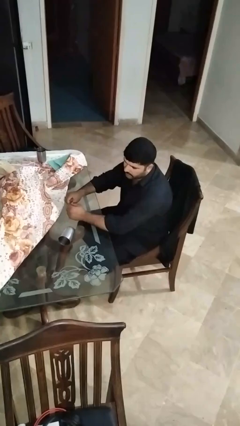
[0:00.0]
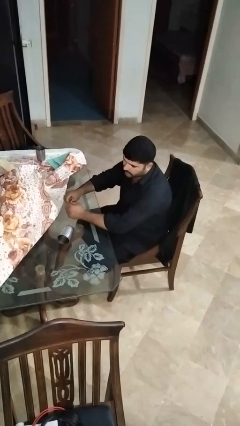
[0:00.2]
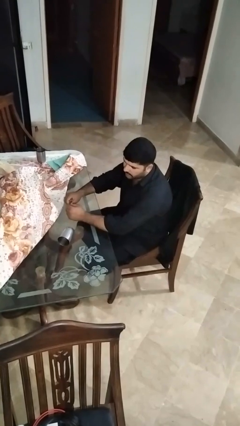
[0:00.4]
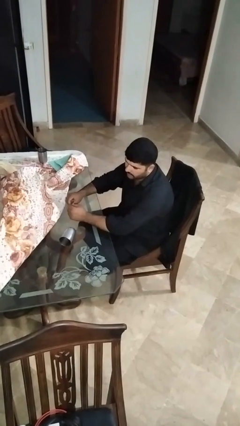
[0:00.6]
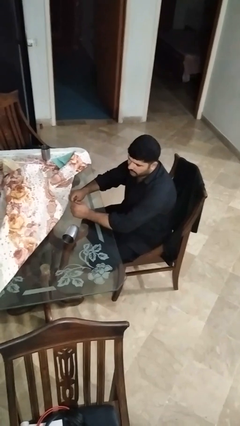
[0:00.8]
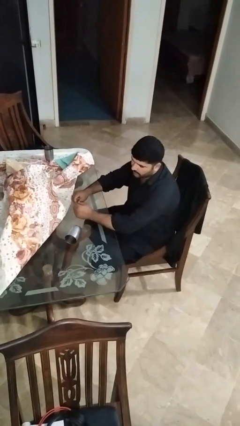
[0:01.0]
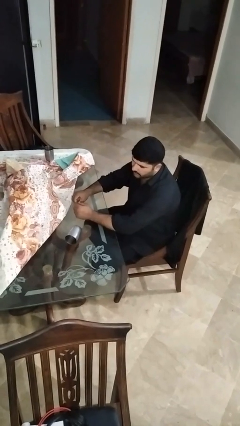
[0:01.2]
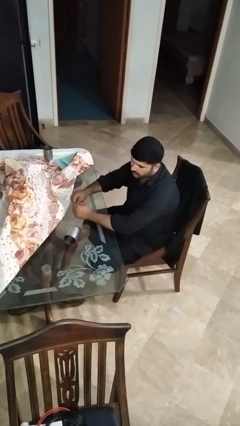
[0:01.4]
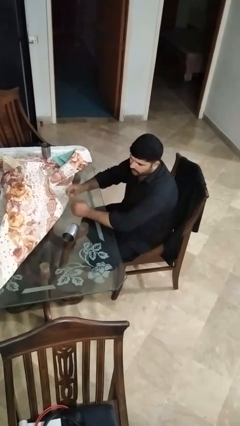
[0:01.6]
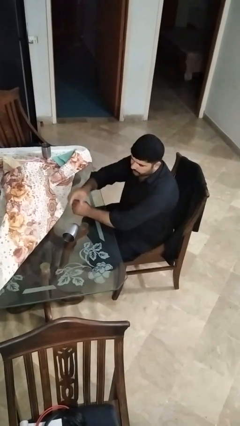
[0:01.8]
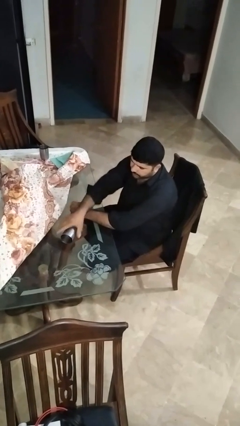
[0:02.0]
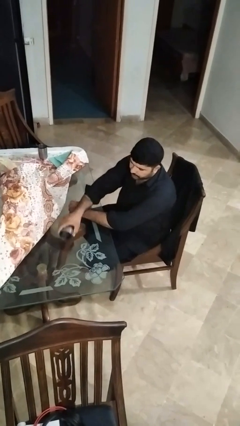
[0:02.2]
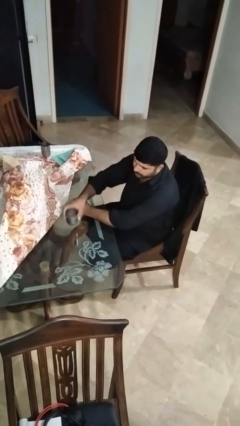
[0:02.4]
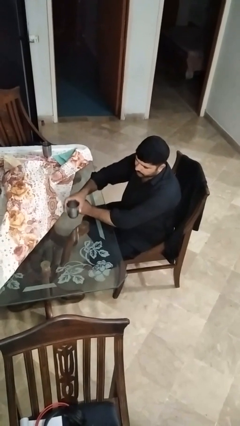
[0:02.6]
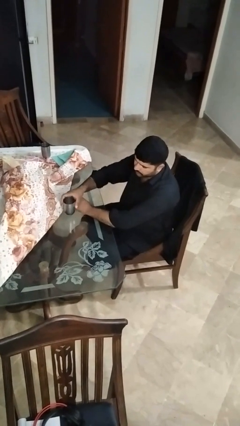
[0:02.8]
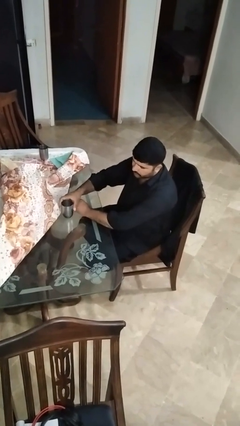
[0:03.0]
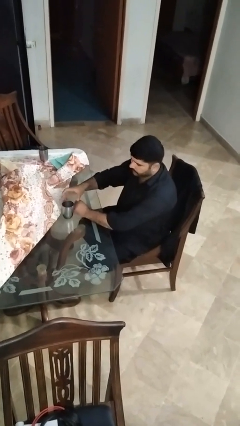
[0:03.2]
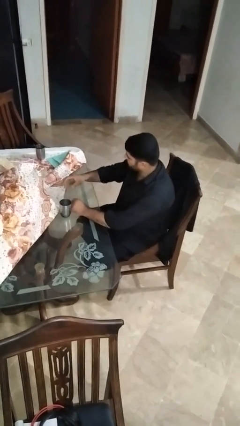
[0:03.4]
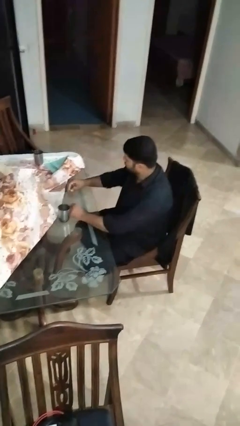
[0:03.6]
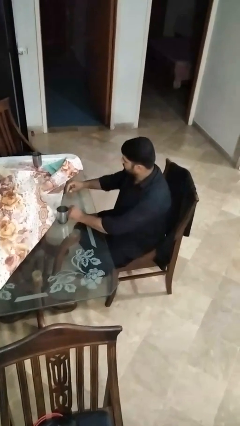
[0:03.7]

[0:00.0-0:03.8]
person sets upright glass

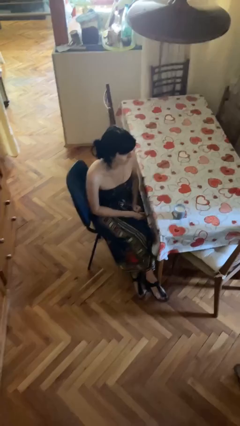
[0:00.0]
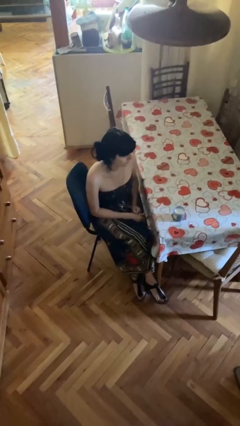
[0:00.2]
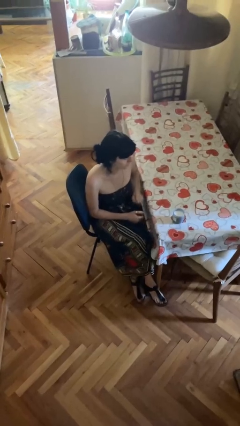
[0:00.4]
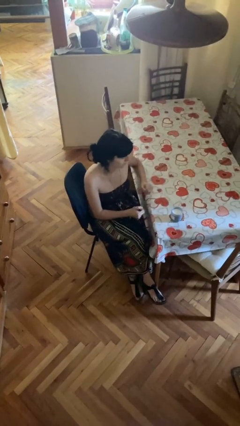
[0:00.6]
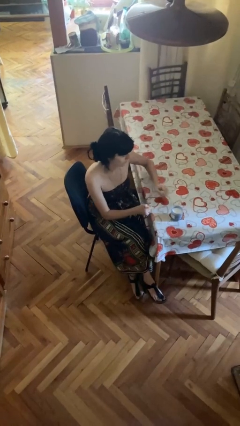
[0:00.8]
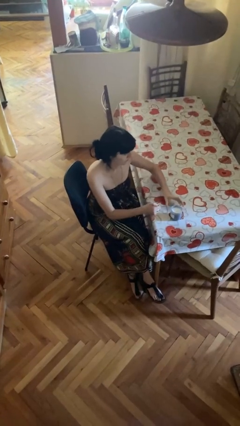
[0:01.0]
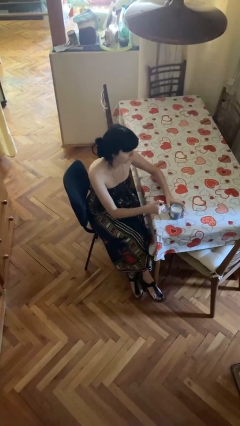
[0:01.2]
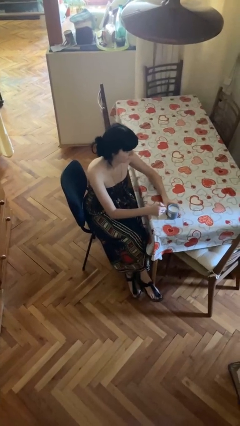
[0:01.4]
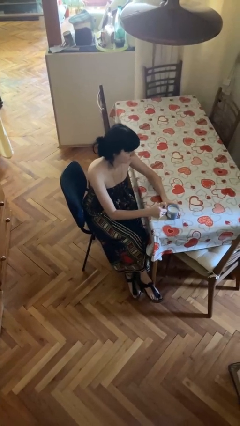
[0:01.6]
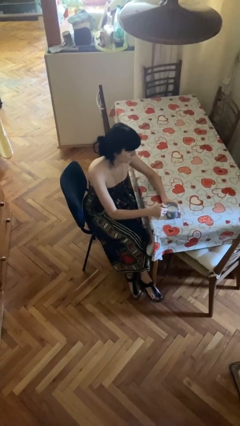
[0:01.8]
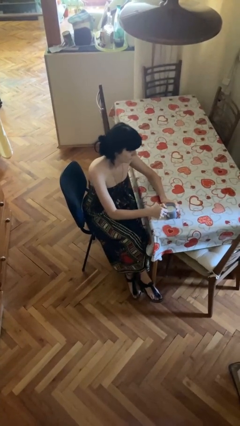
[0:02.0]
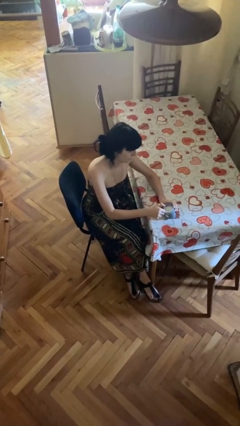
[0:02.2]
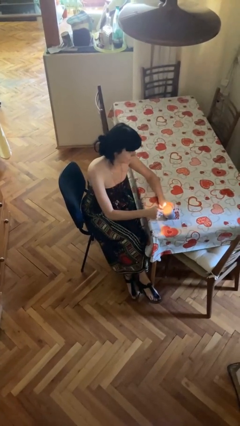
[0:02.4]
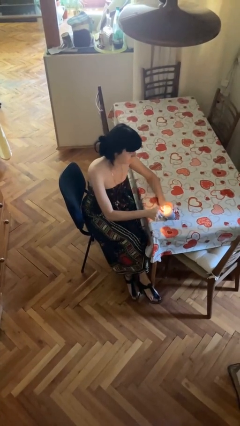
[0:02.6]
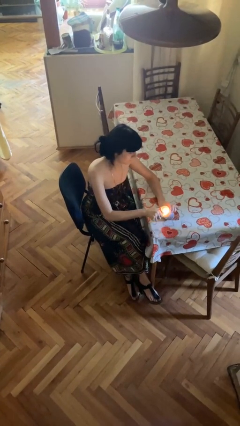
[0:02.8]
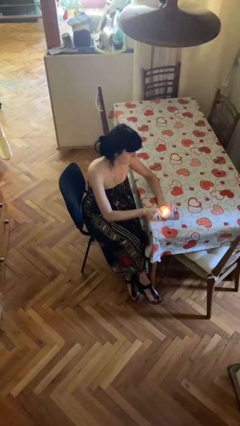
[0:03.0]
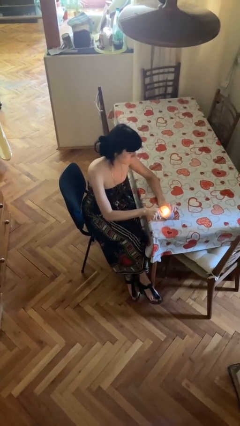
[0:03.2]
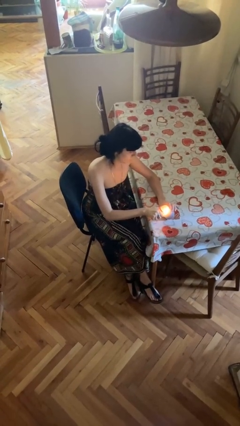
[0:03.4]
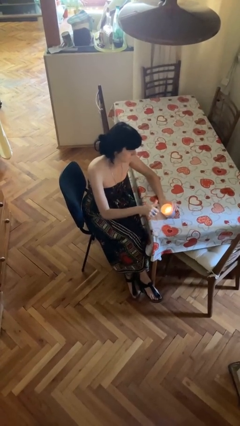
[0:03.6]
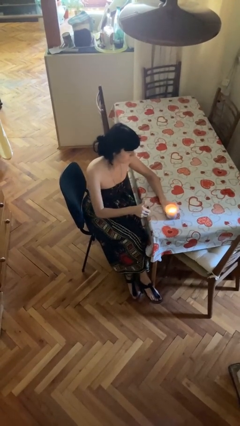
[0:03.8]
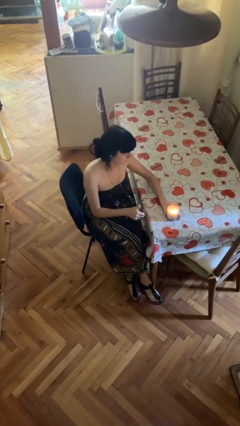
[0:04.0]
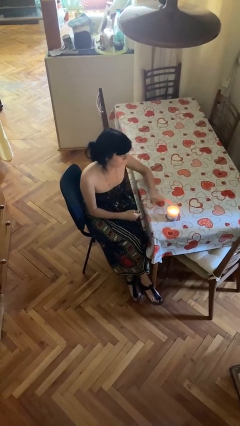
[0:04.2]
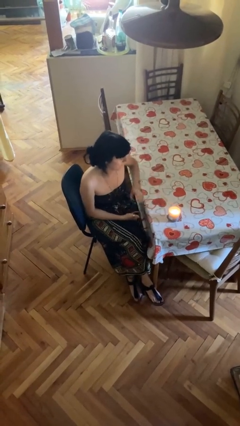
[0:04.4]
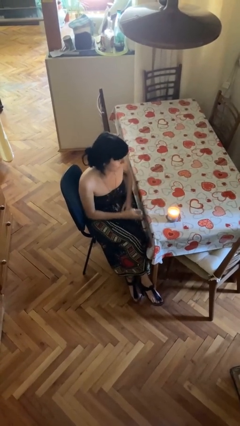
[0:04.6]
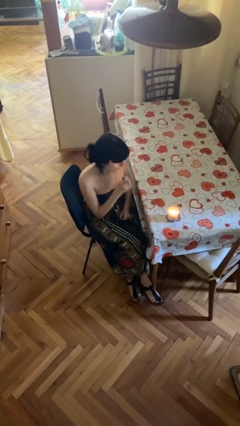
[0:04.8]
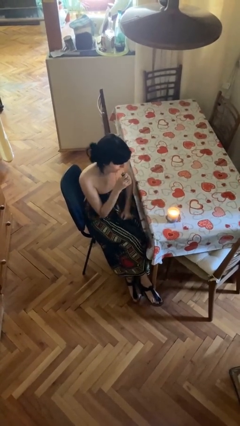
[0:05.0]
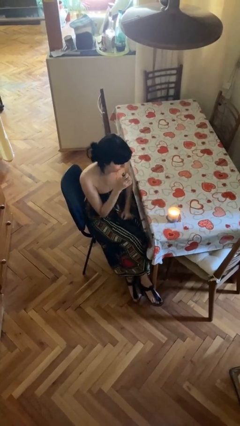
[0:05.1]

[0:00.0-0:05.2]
person lights candle

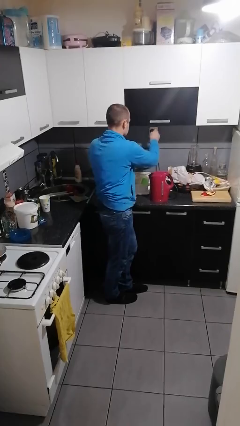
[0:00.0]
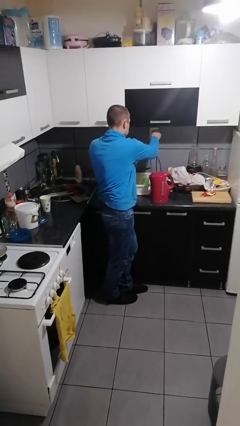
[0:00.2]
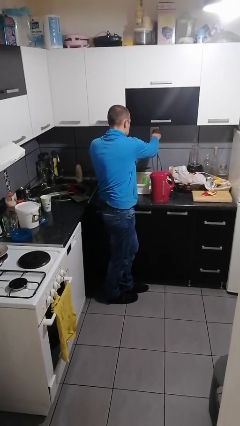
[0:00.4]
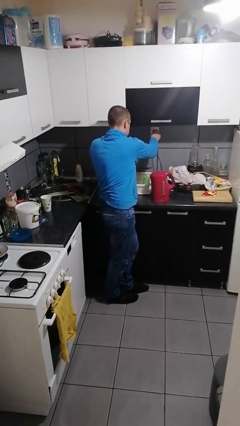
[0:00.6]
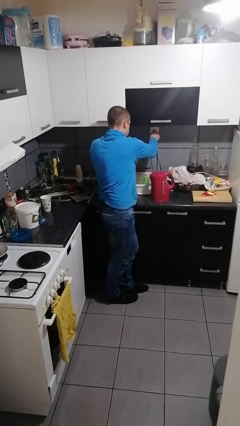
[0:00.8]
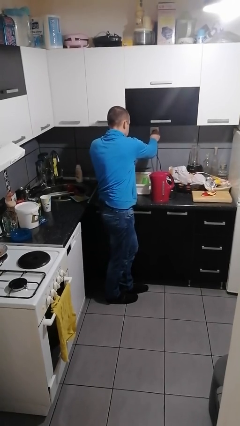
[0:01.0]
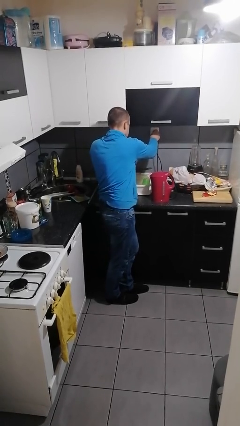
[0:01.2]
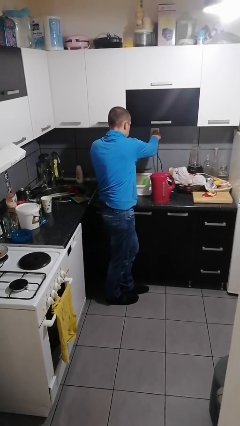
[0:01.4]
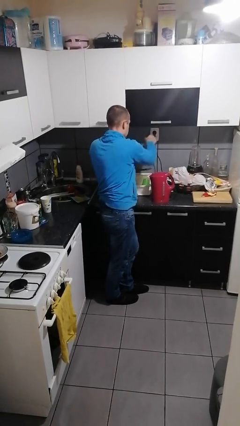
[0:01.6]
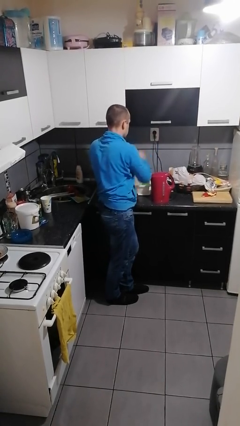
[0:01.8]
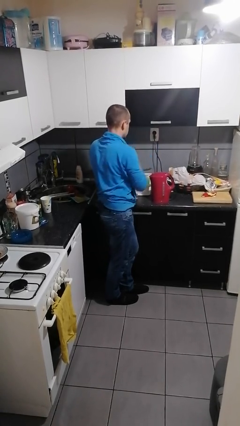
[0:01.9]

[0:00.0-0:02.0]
person plugs into electrical socket

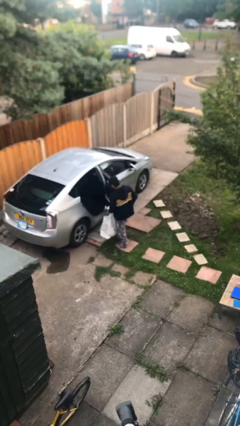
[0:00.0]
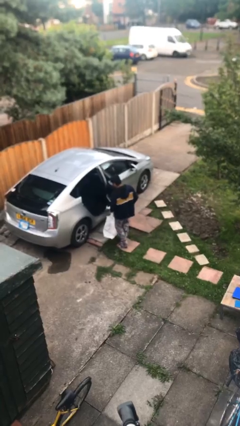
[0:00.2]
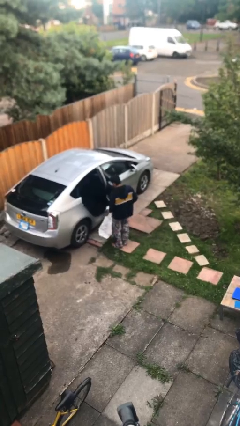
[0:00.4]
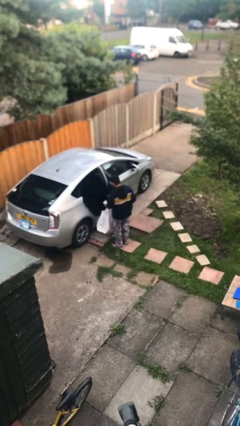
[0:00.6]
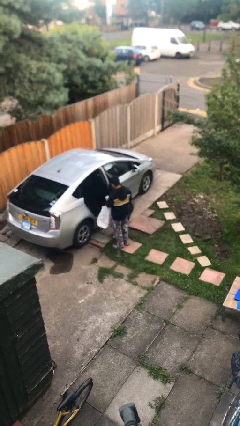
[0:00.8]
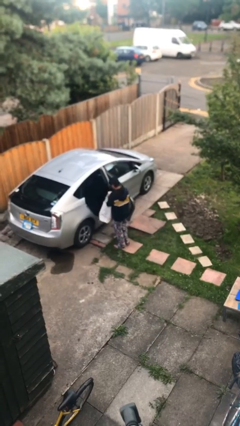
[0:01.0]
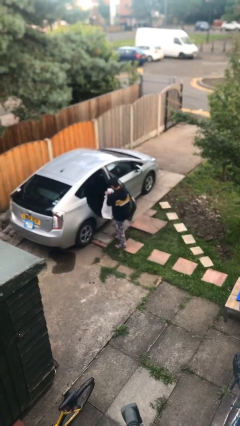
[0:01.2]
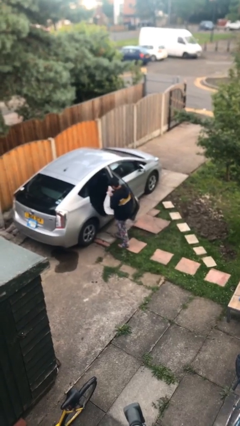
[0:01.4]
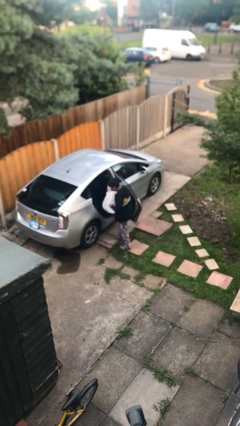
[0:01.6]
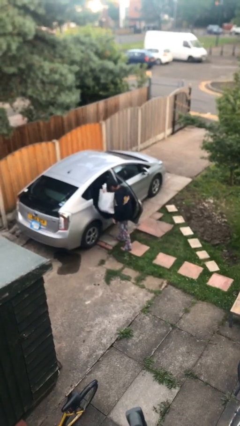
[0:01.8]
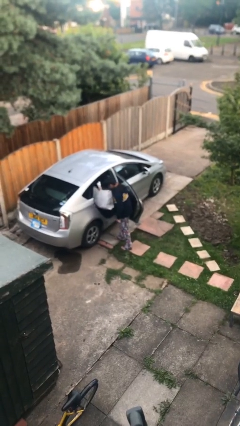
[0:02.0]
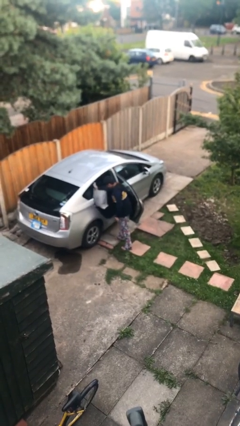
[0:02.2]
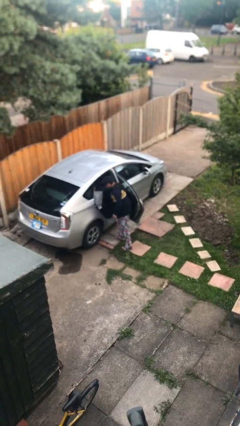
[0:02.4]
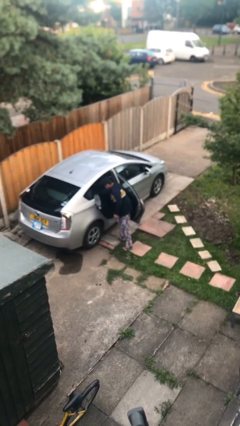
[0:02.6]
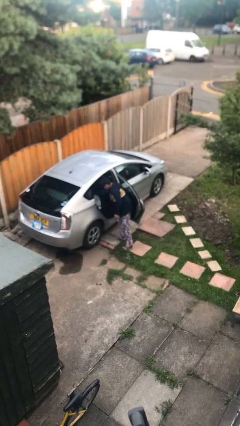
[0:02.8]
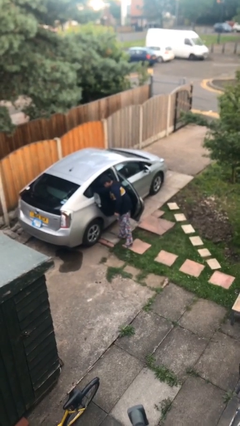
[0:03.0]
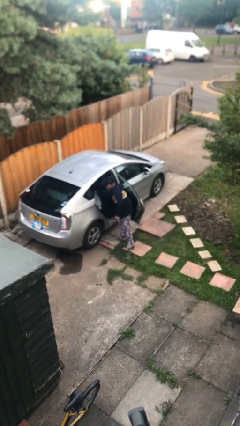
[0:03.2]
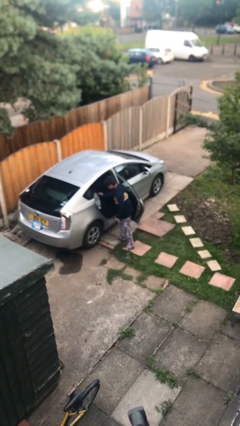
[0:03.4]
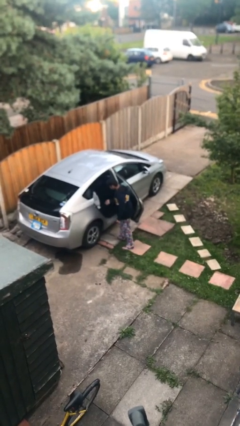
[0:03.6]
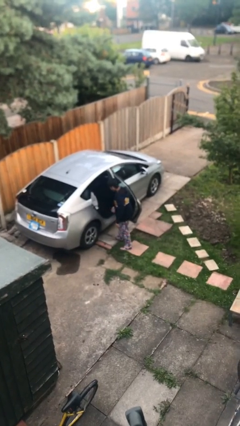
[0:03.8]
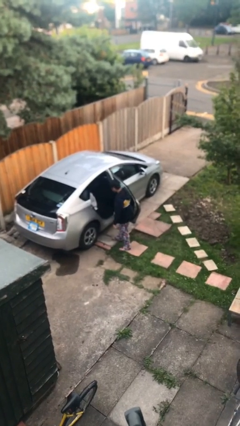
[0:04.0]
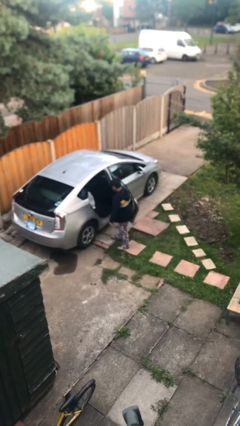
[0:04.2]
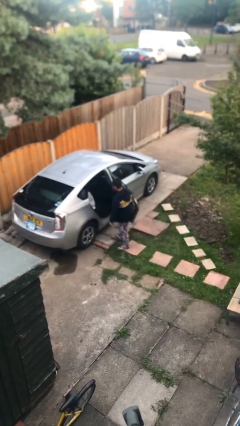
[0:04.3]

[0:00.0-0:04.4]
person loads car

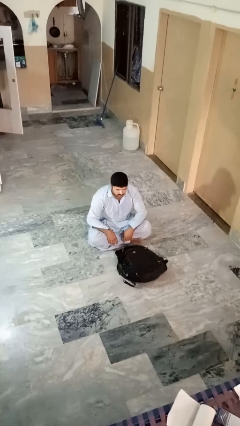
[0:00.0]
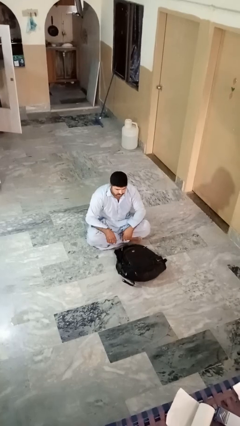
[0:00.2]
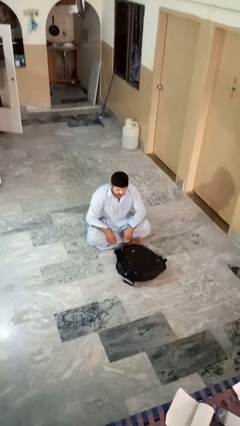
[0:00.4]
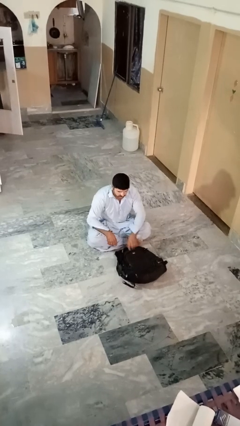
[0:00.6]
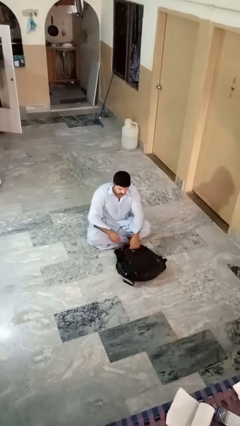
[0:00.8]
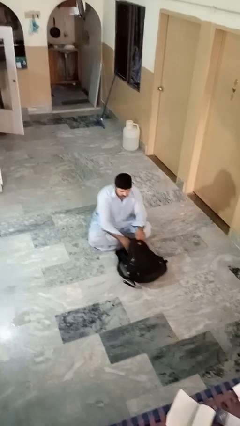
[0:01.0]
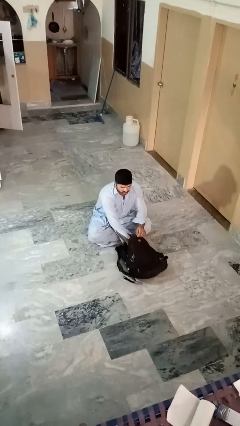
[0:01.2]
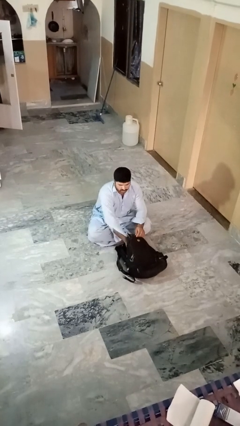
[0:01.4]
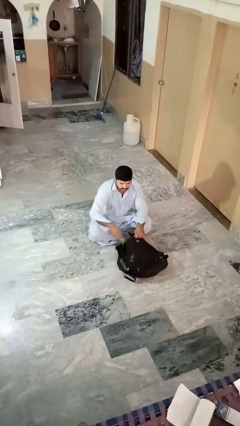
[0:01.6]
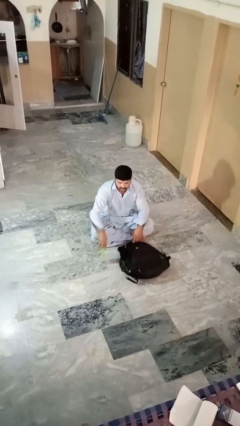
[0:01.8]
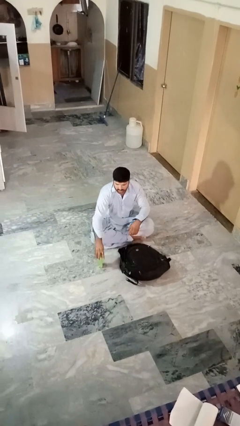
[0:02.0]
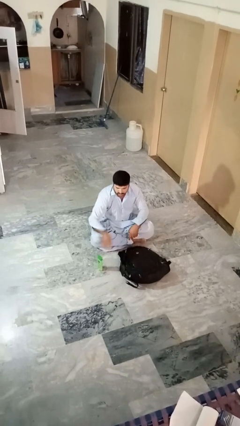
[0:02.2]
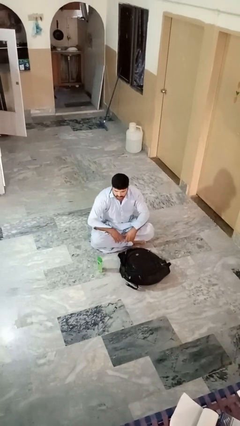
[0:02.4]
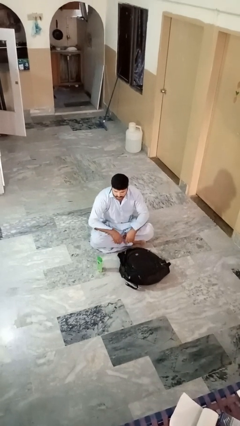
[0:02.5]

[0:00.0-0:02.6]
person takes object from bag
